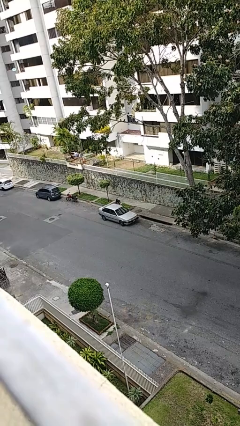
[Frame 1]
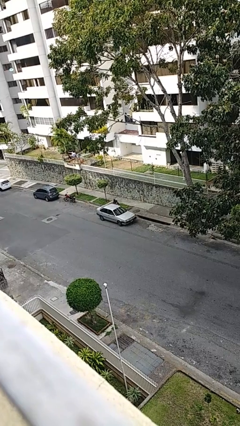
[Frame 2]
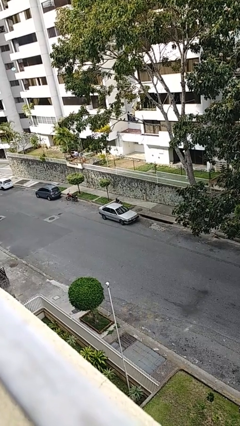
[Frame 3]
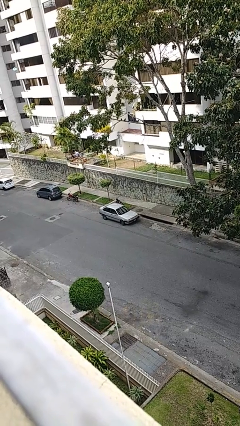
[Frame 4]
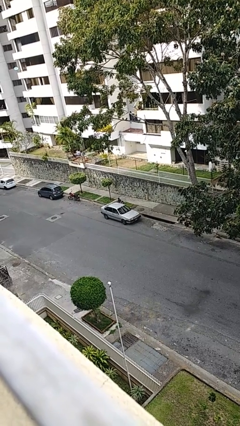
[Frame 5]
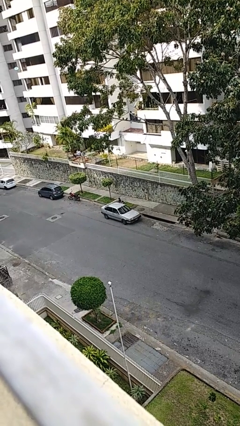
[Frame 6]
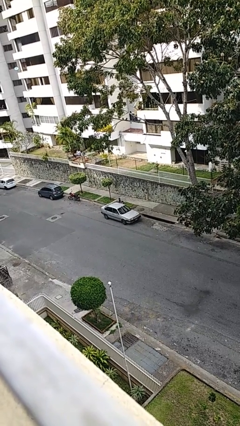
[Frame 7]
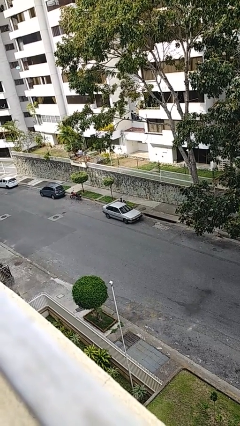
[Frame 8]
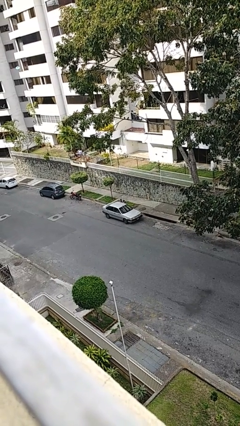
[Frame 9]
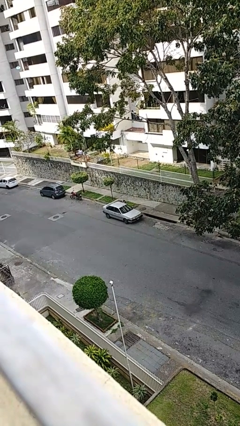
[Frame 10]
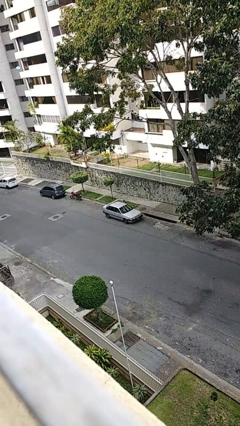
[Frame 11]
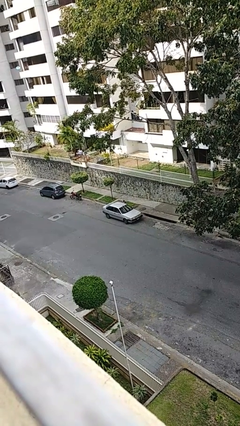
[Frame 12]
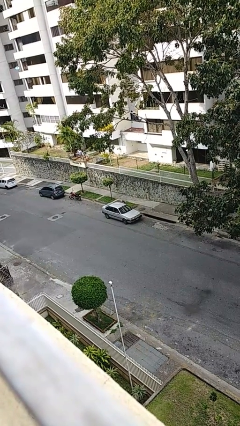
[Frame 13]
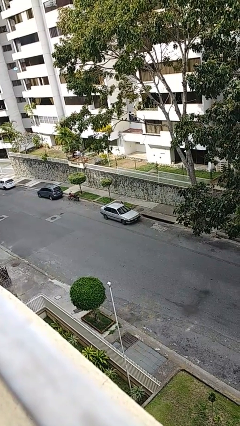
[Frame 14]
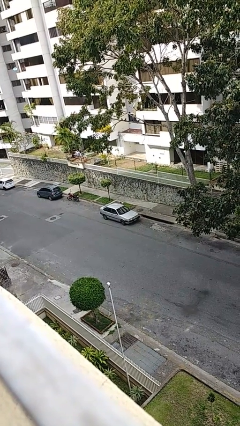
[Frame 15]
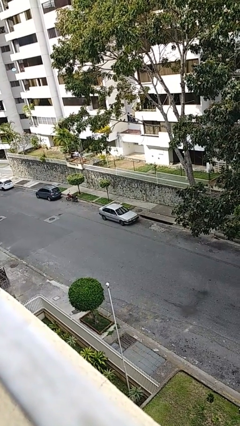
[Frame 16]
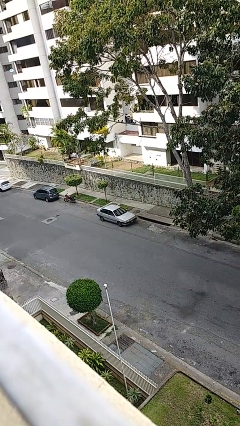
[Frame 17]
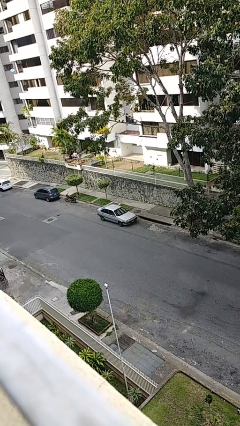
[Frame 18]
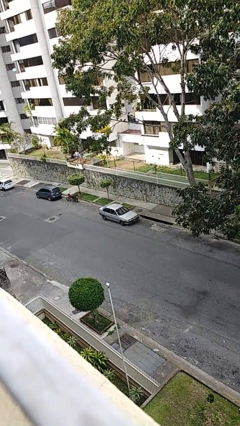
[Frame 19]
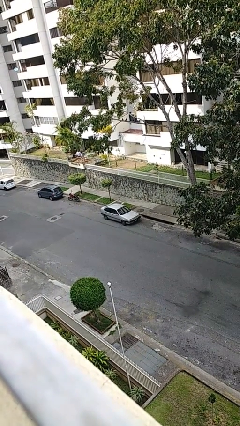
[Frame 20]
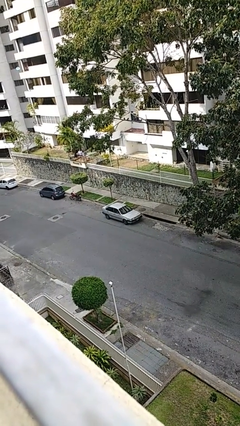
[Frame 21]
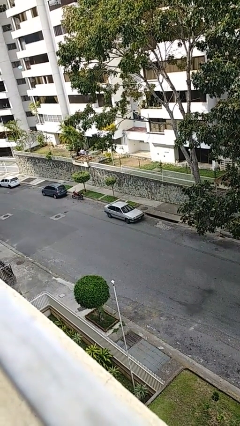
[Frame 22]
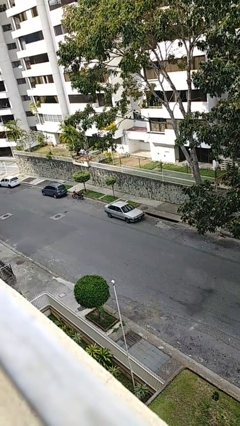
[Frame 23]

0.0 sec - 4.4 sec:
car picks up person

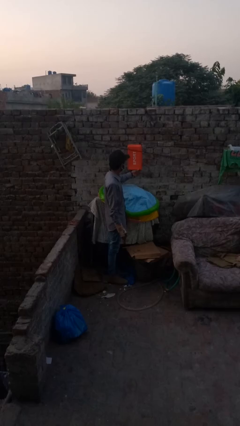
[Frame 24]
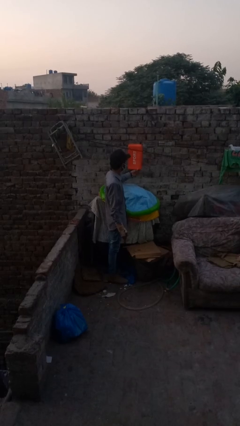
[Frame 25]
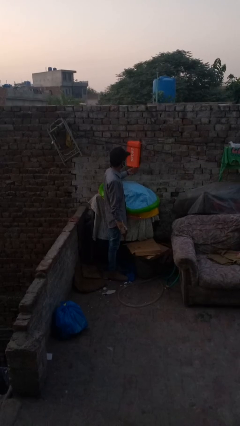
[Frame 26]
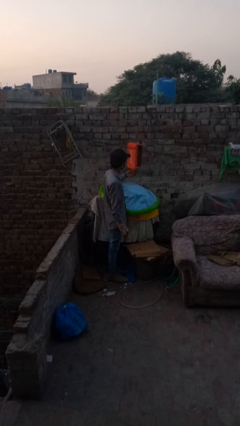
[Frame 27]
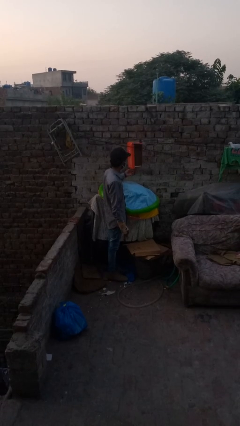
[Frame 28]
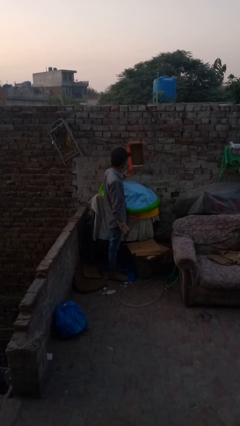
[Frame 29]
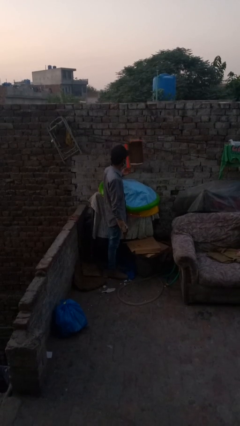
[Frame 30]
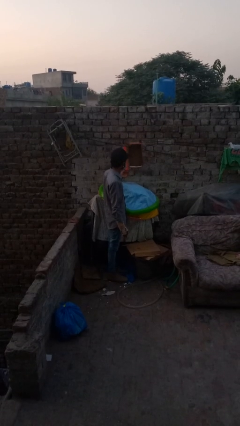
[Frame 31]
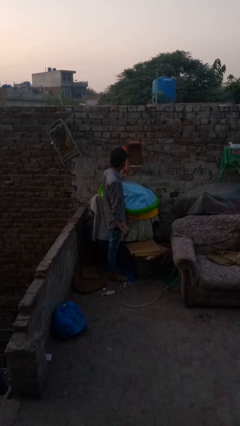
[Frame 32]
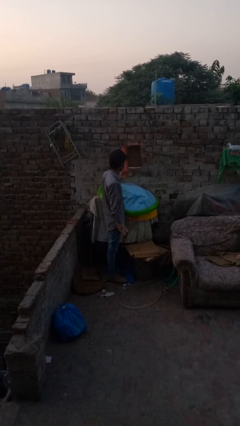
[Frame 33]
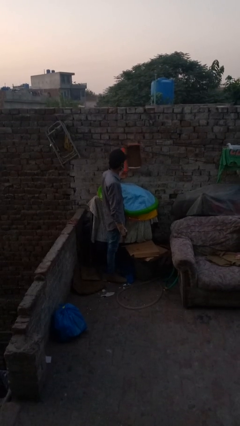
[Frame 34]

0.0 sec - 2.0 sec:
person opens mailbox

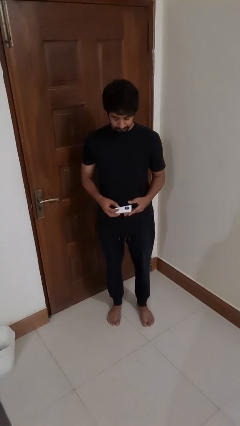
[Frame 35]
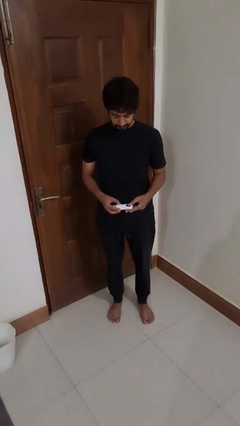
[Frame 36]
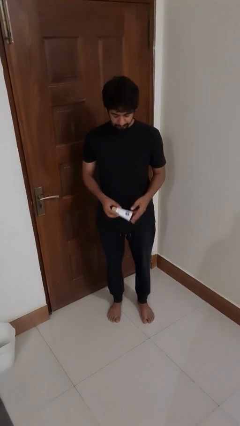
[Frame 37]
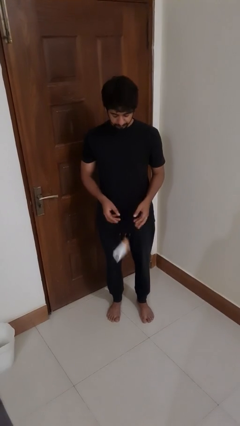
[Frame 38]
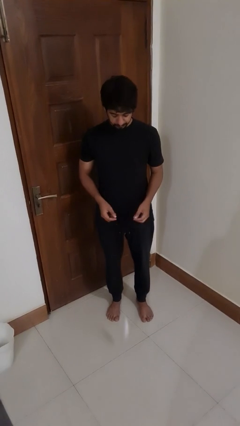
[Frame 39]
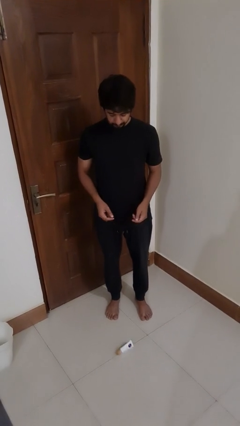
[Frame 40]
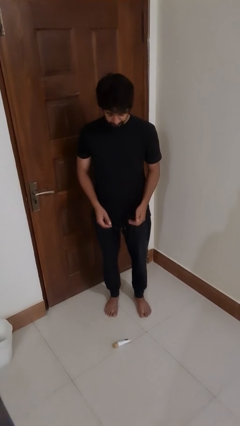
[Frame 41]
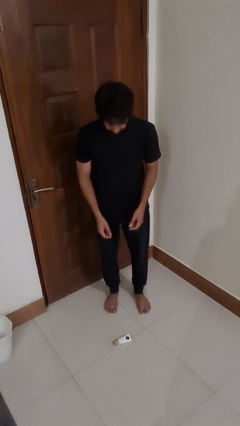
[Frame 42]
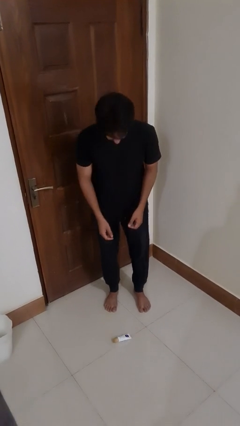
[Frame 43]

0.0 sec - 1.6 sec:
person drops object

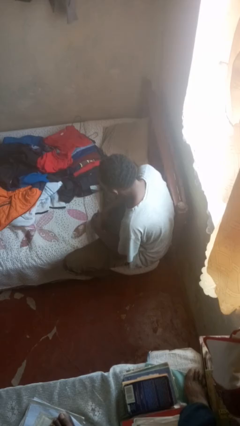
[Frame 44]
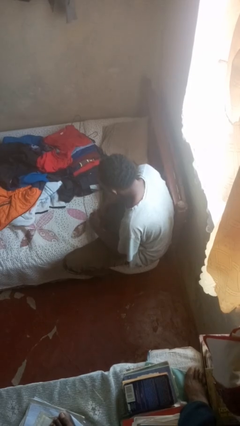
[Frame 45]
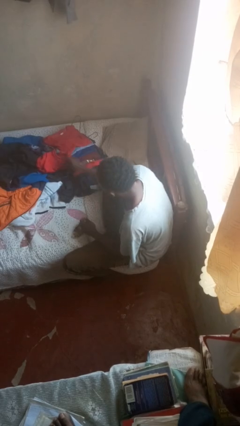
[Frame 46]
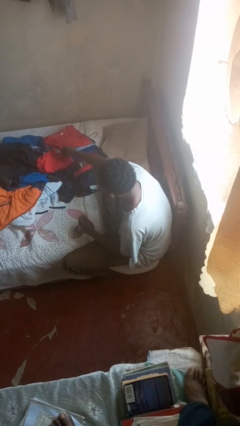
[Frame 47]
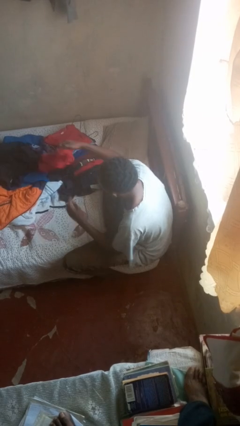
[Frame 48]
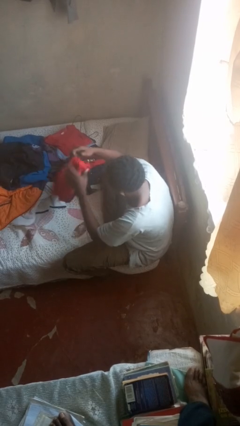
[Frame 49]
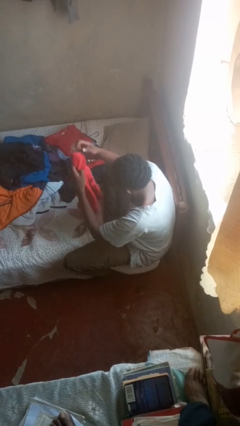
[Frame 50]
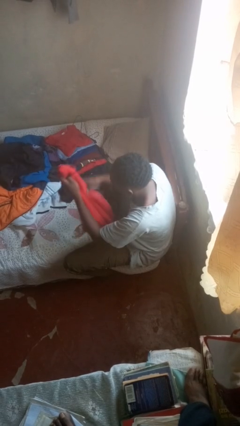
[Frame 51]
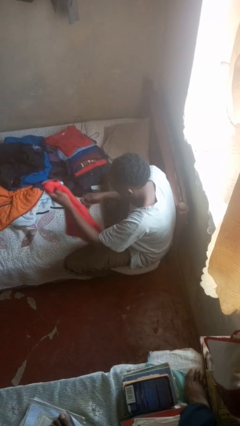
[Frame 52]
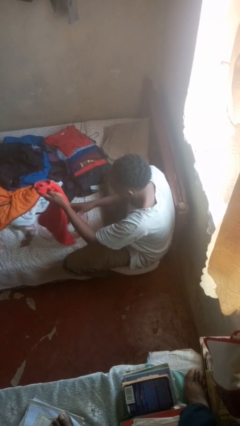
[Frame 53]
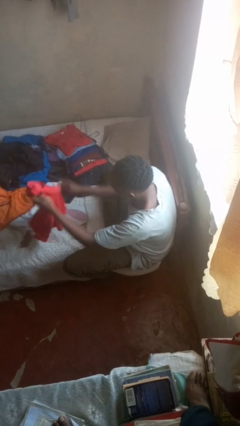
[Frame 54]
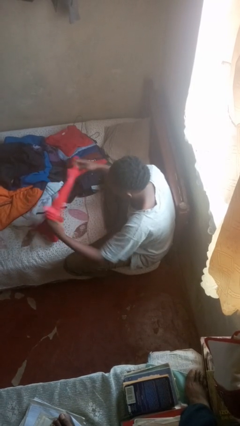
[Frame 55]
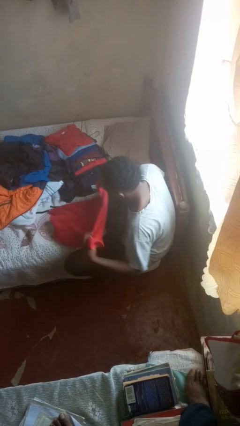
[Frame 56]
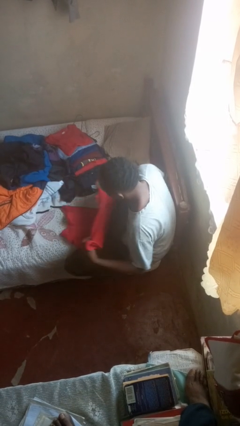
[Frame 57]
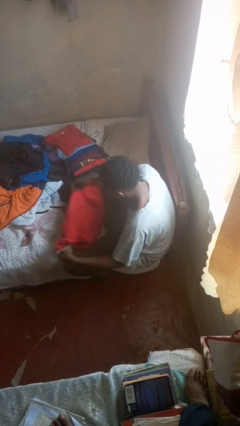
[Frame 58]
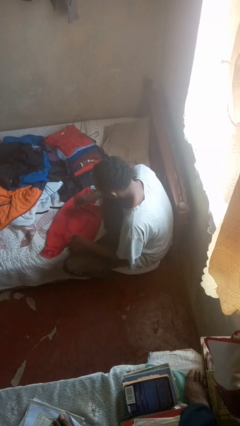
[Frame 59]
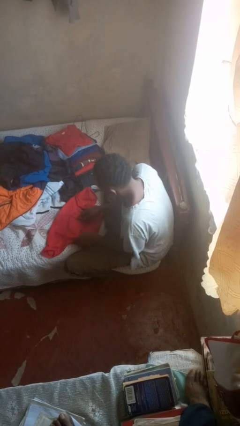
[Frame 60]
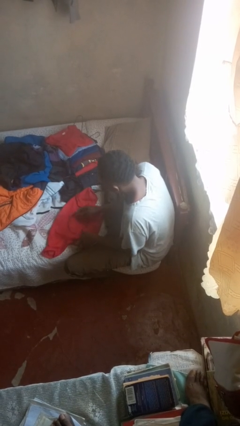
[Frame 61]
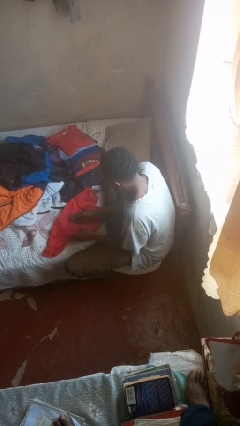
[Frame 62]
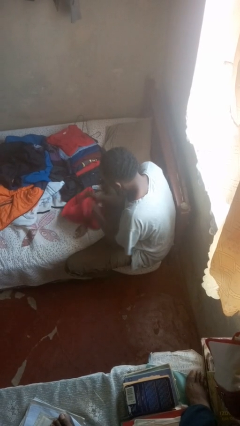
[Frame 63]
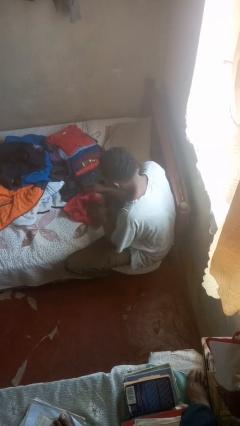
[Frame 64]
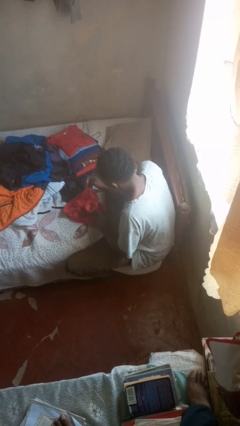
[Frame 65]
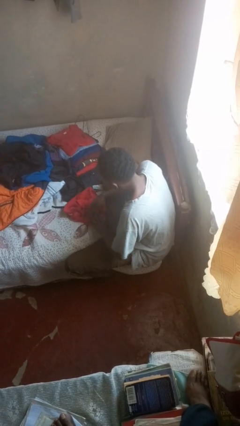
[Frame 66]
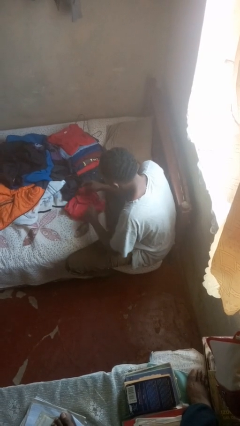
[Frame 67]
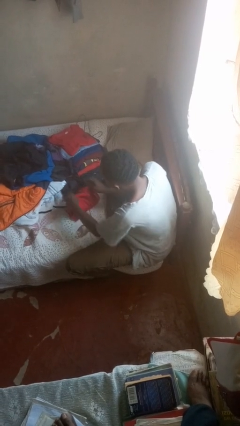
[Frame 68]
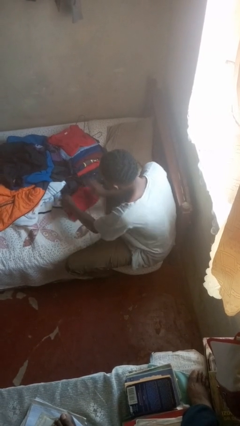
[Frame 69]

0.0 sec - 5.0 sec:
person folds shirt

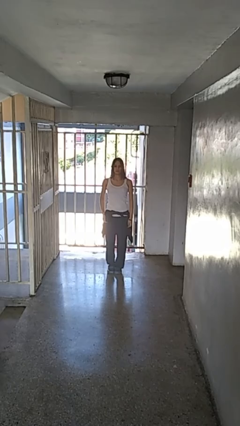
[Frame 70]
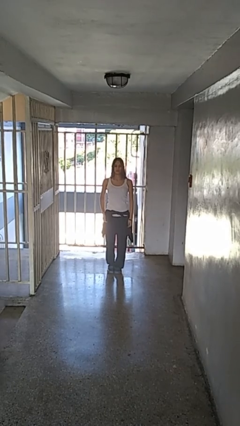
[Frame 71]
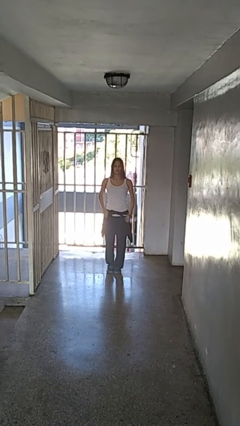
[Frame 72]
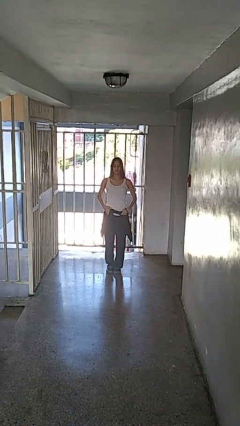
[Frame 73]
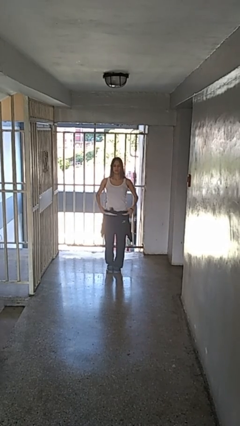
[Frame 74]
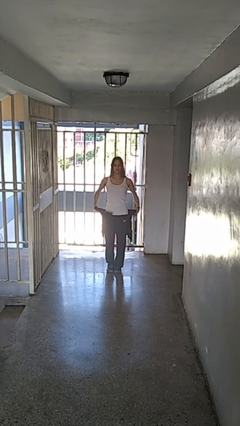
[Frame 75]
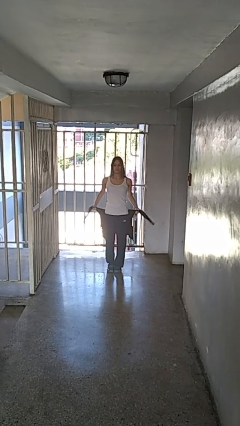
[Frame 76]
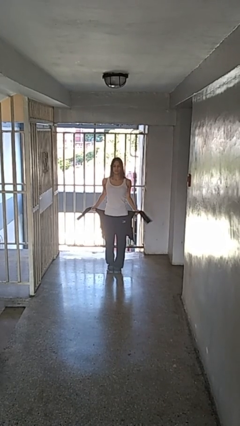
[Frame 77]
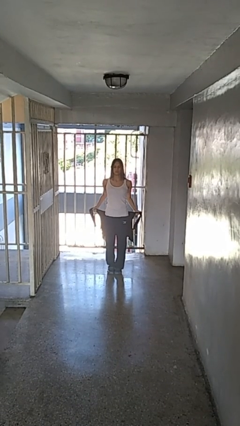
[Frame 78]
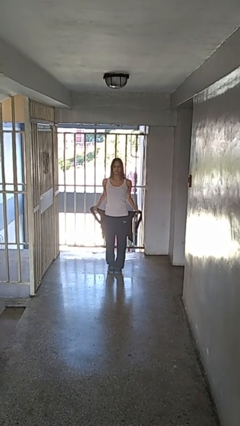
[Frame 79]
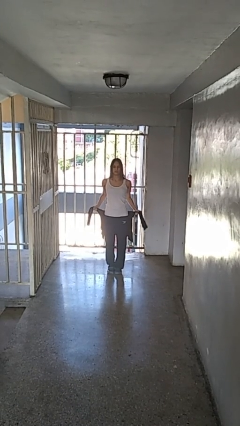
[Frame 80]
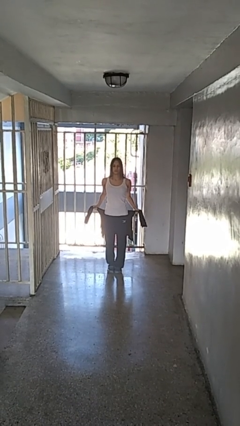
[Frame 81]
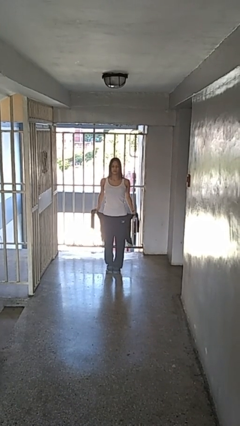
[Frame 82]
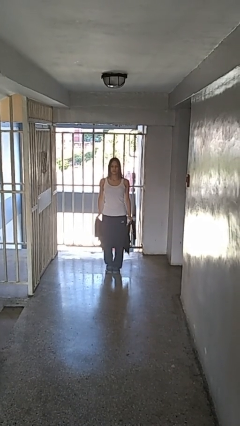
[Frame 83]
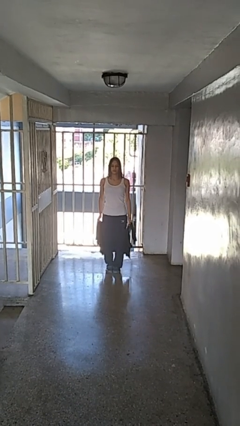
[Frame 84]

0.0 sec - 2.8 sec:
person unties jacket around waist

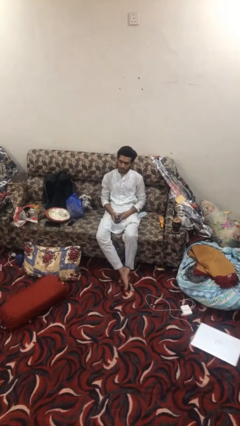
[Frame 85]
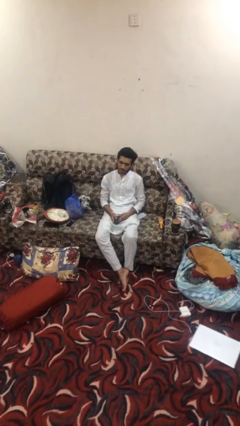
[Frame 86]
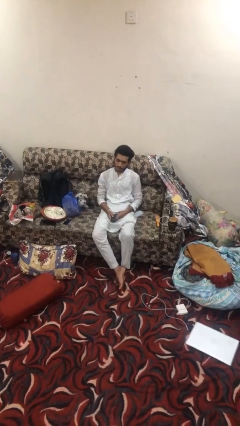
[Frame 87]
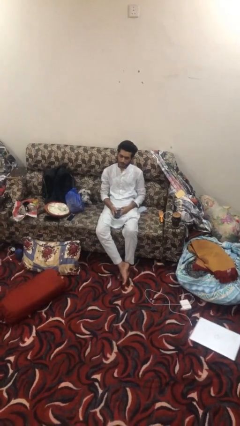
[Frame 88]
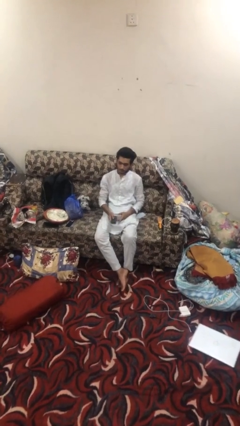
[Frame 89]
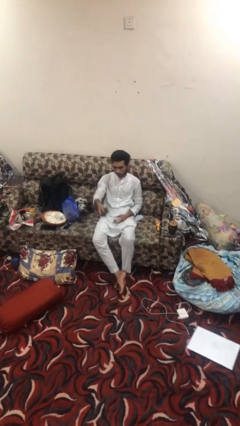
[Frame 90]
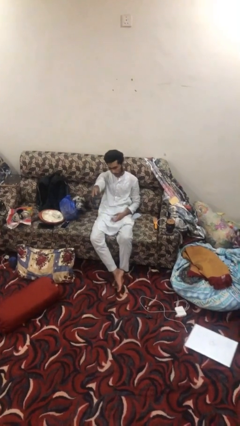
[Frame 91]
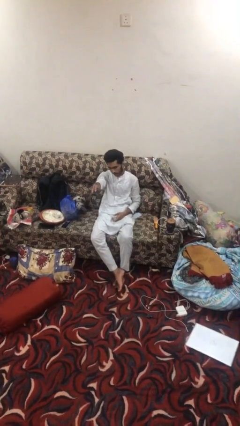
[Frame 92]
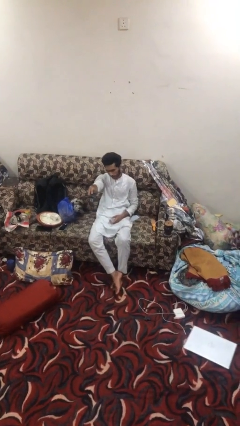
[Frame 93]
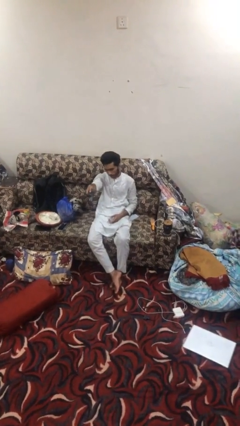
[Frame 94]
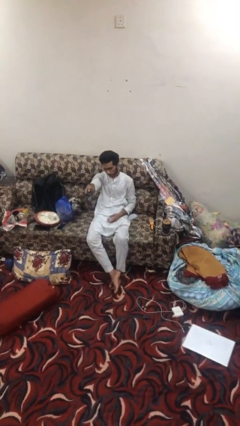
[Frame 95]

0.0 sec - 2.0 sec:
person uses television remote
